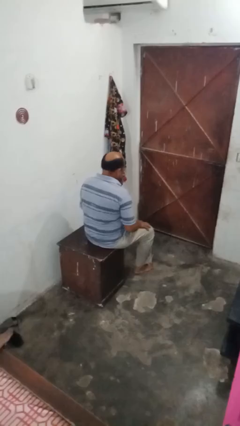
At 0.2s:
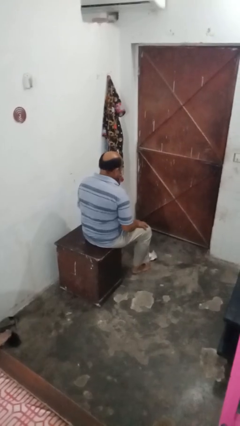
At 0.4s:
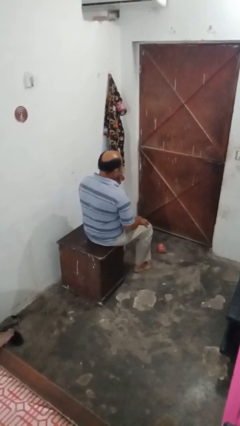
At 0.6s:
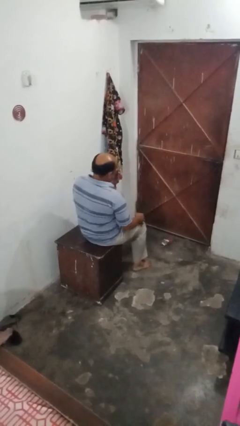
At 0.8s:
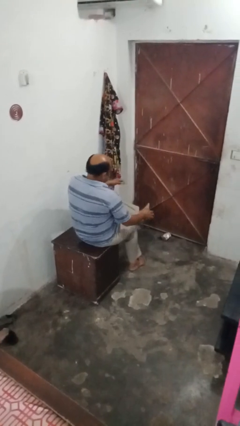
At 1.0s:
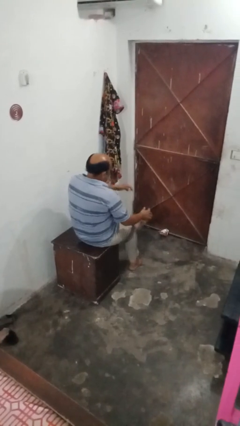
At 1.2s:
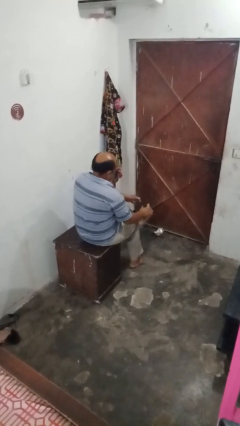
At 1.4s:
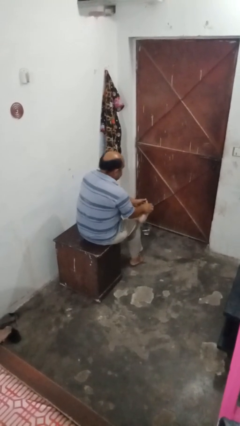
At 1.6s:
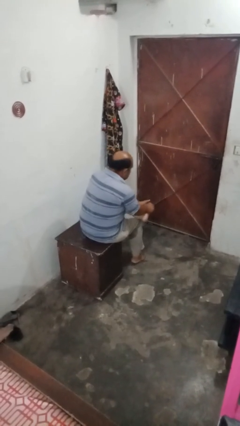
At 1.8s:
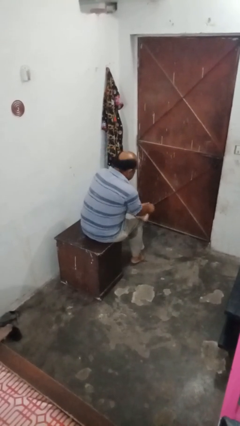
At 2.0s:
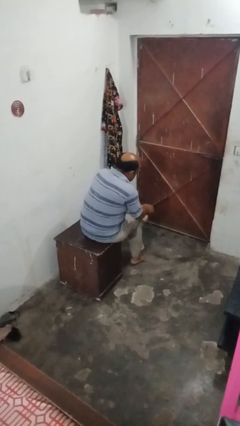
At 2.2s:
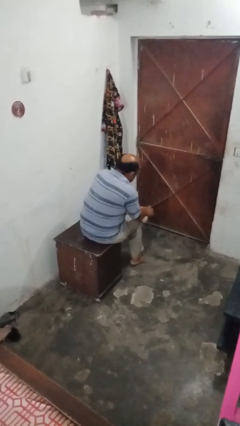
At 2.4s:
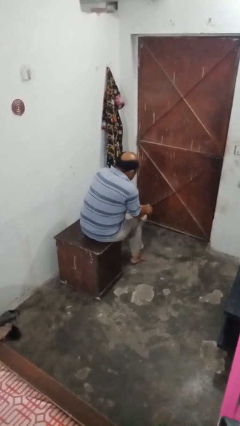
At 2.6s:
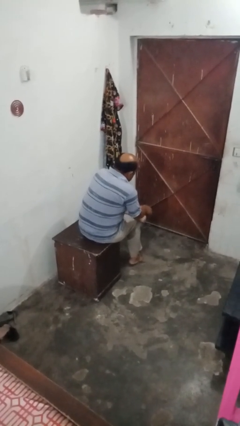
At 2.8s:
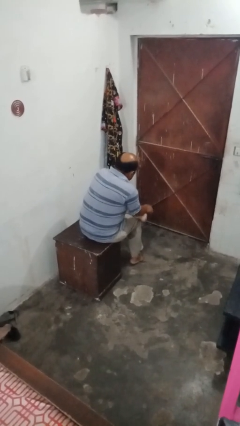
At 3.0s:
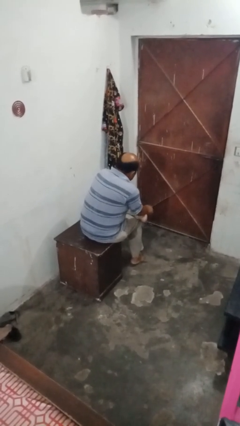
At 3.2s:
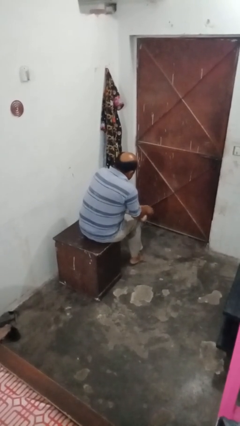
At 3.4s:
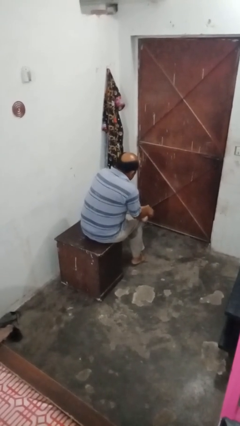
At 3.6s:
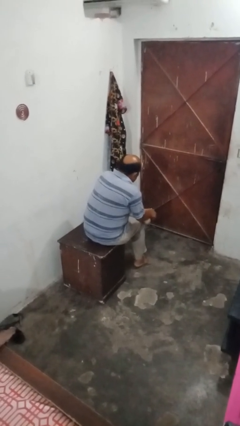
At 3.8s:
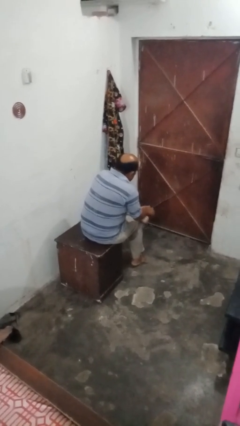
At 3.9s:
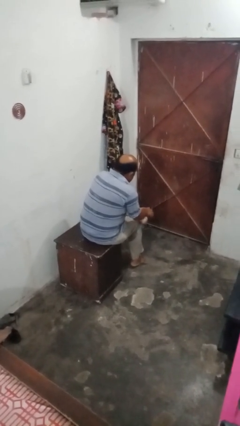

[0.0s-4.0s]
person rubs foot

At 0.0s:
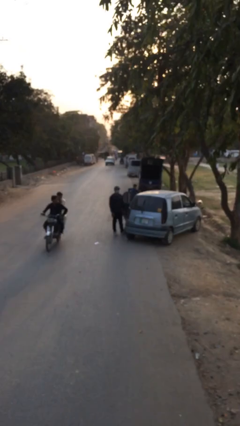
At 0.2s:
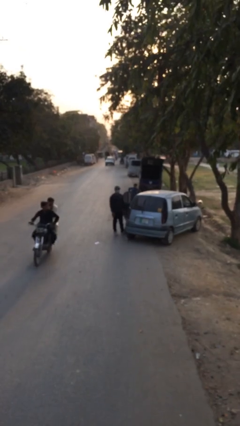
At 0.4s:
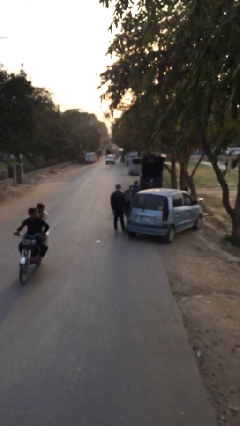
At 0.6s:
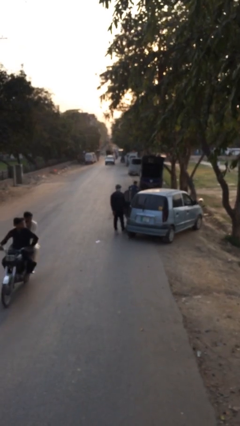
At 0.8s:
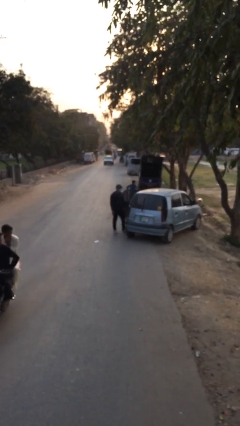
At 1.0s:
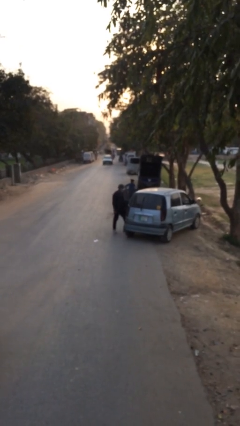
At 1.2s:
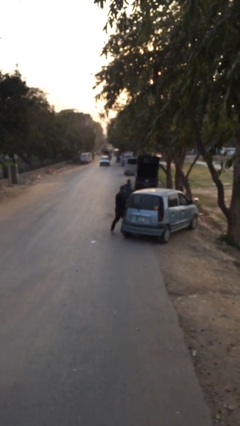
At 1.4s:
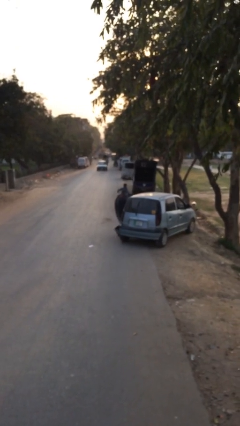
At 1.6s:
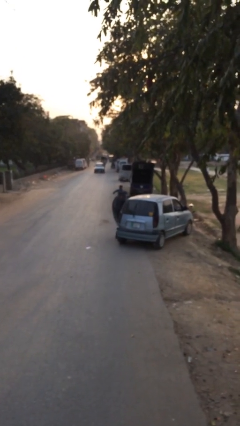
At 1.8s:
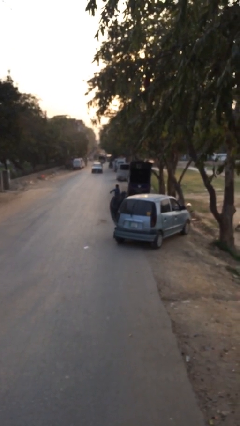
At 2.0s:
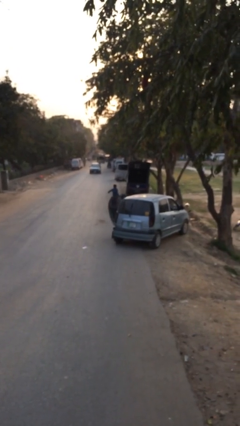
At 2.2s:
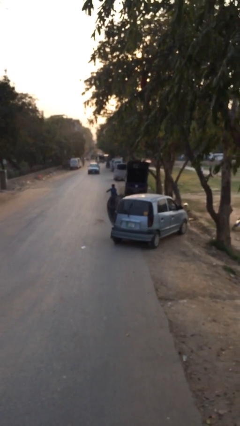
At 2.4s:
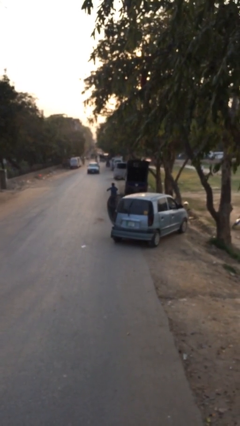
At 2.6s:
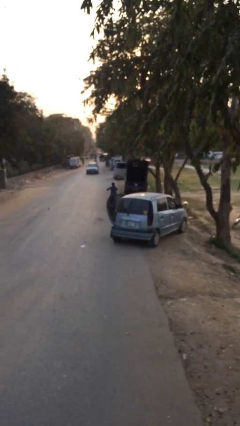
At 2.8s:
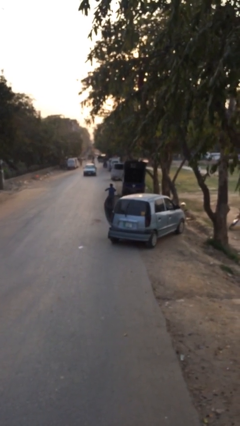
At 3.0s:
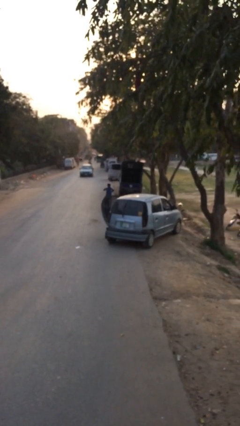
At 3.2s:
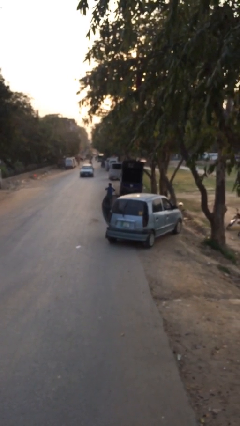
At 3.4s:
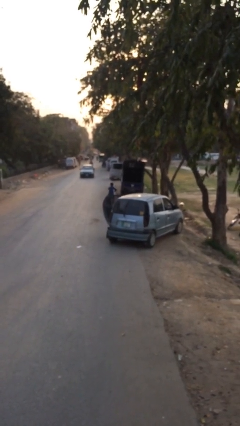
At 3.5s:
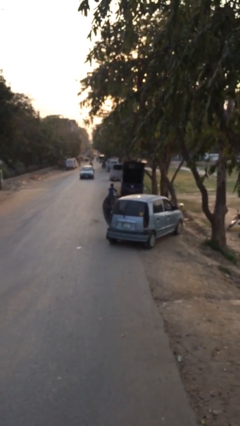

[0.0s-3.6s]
person enters car

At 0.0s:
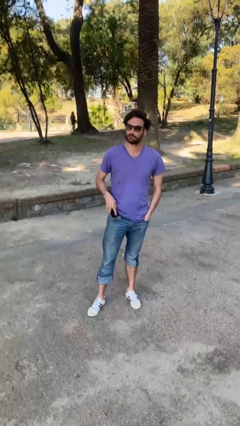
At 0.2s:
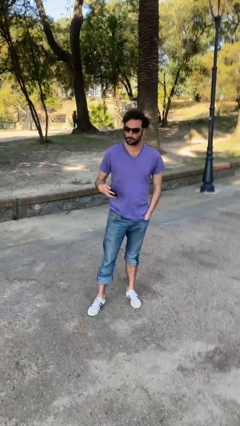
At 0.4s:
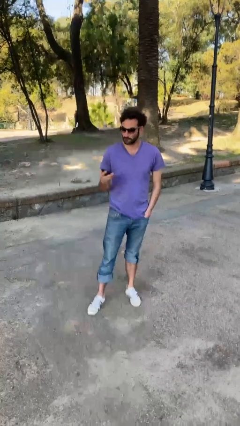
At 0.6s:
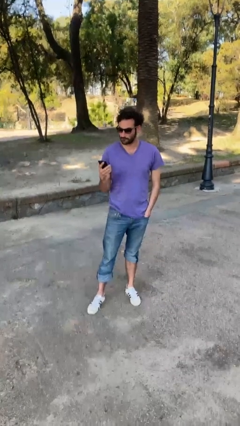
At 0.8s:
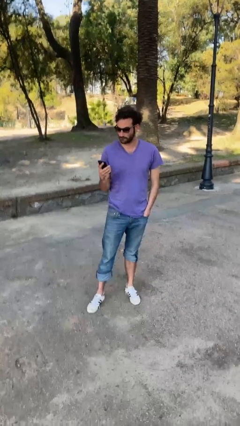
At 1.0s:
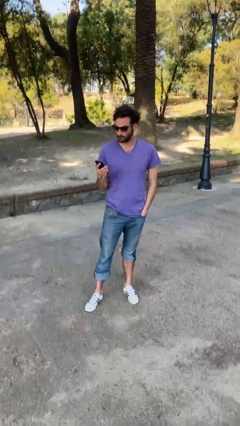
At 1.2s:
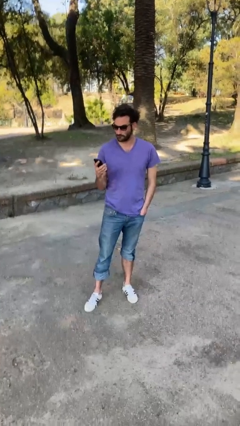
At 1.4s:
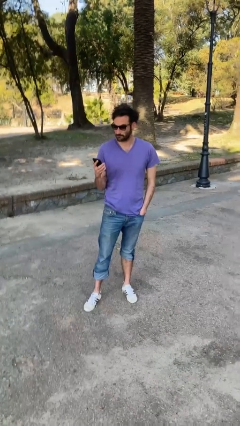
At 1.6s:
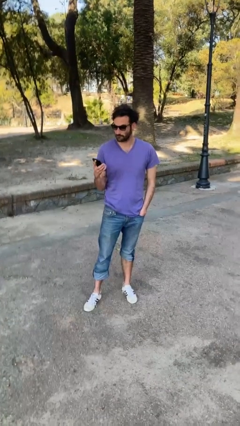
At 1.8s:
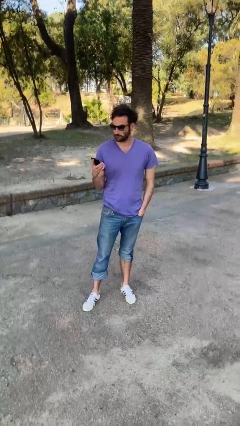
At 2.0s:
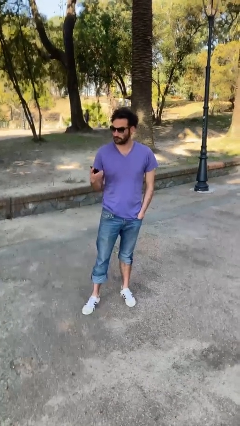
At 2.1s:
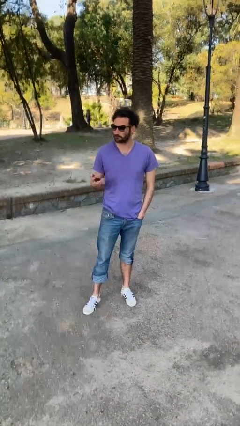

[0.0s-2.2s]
person takes phone from pocket

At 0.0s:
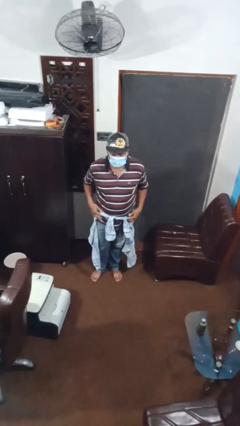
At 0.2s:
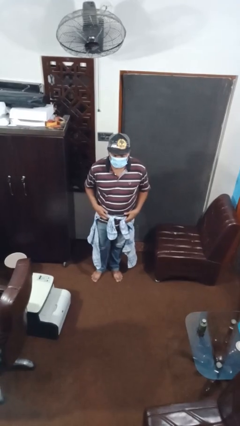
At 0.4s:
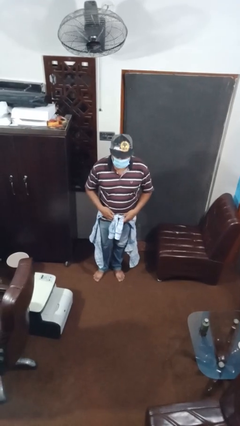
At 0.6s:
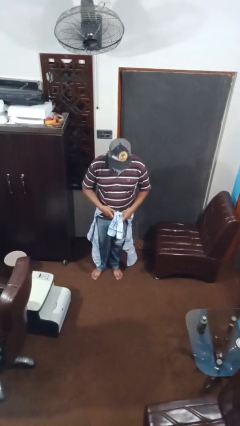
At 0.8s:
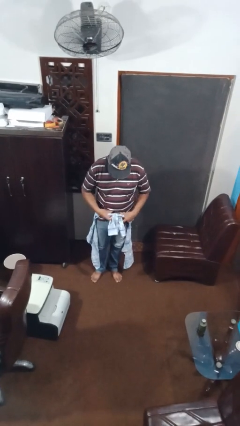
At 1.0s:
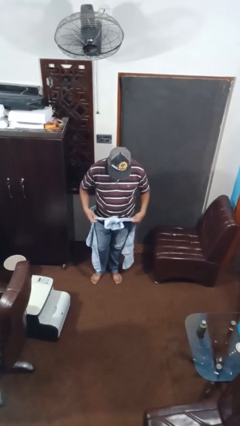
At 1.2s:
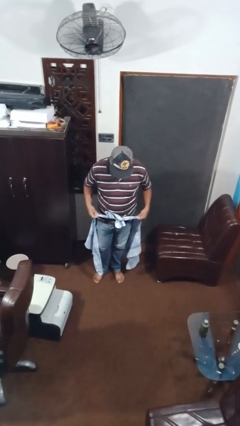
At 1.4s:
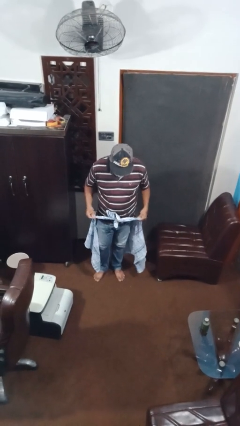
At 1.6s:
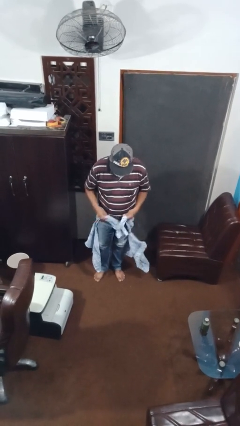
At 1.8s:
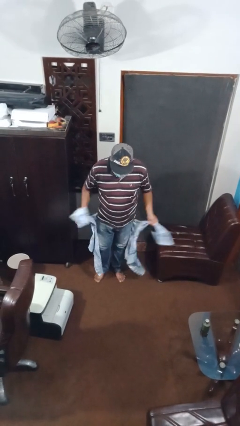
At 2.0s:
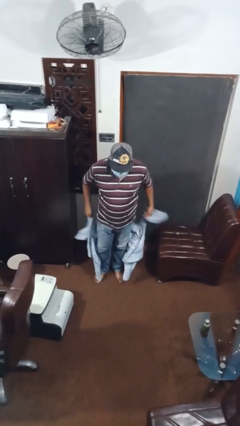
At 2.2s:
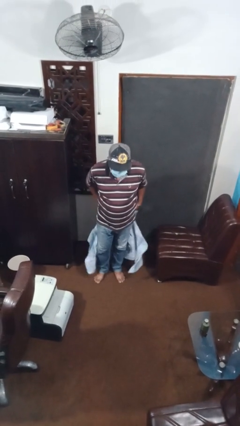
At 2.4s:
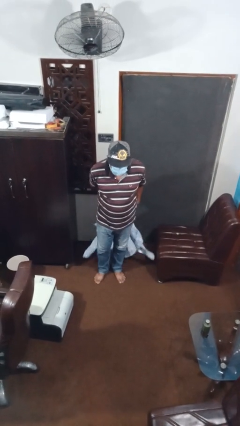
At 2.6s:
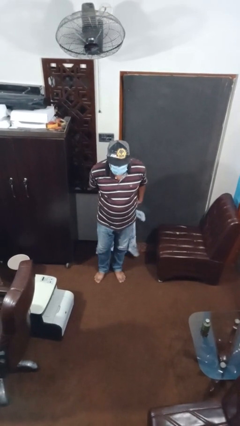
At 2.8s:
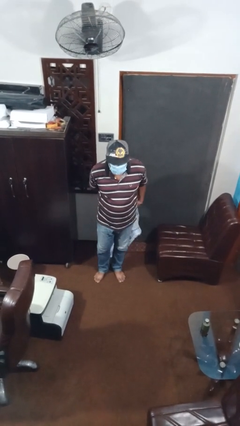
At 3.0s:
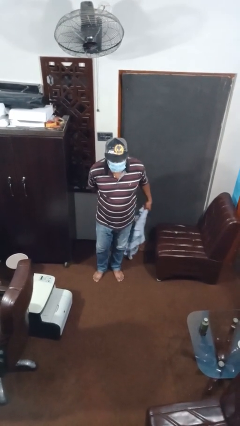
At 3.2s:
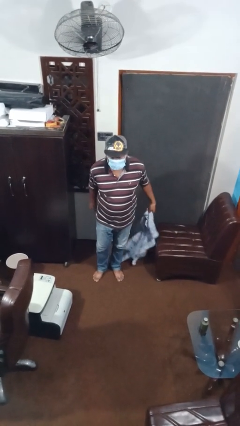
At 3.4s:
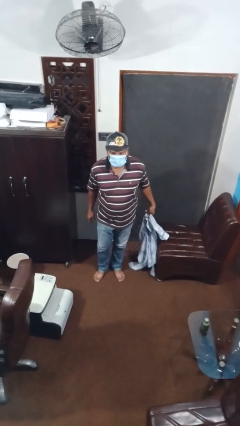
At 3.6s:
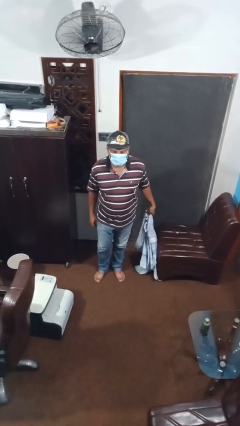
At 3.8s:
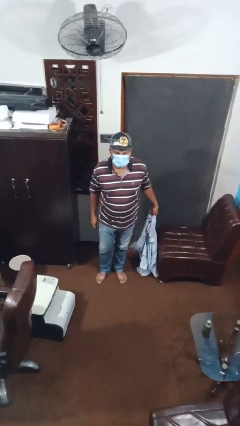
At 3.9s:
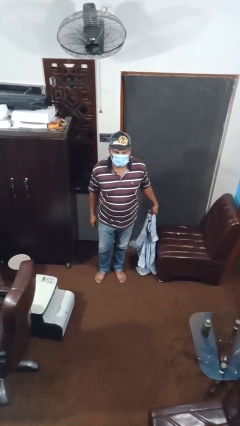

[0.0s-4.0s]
person unties jacket around waist

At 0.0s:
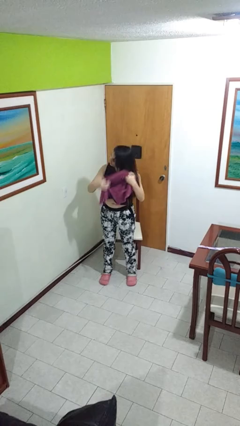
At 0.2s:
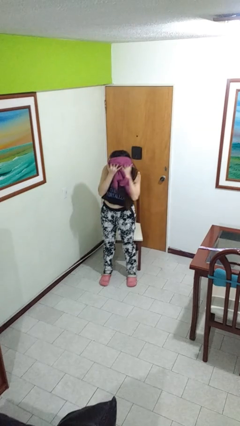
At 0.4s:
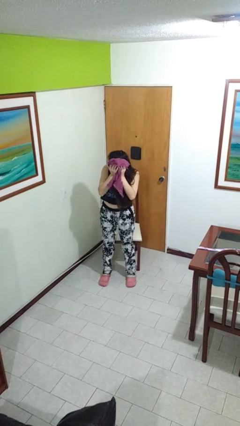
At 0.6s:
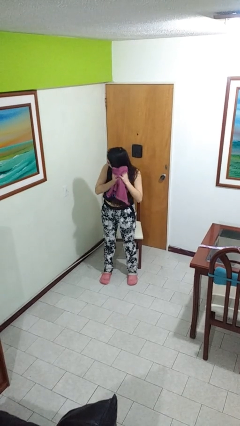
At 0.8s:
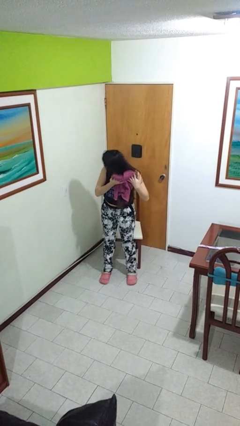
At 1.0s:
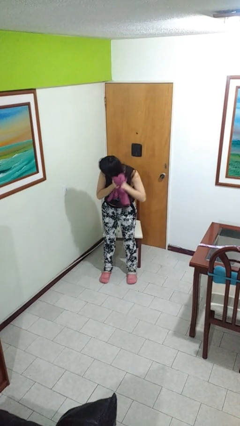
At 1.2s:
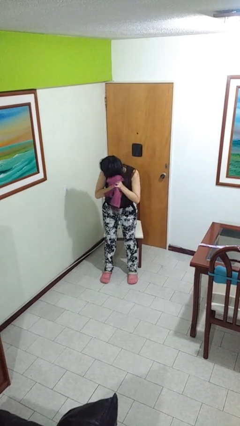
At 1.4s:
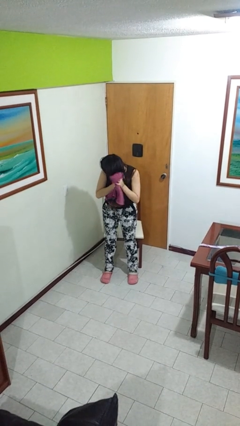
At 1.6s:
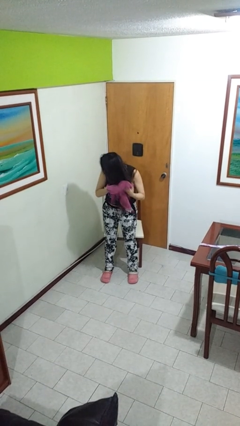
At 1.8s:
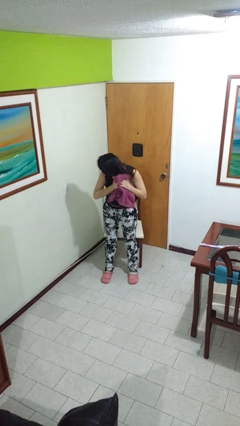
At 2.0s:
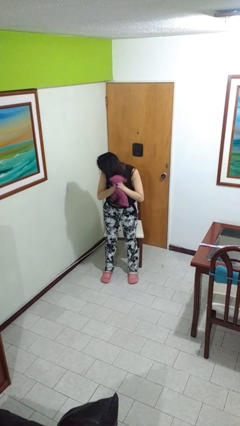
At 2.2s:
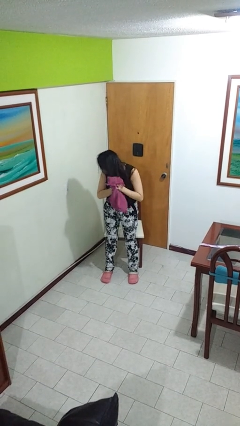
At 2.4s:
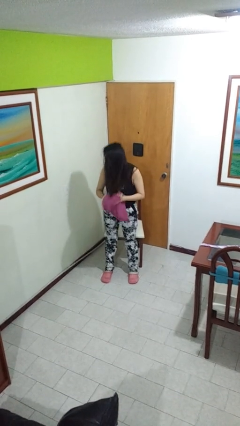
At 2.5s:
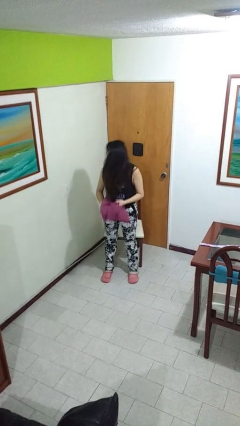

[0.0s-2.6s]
person dries hair with towel

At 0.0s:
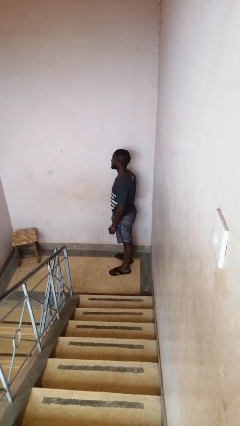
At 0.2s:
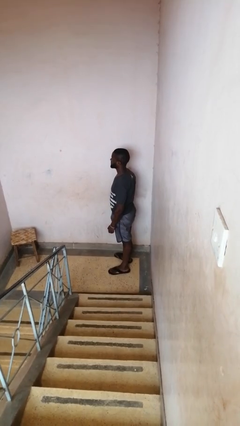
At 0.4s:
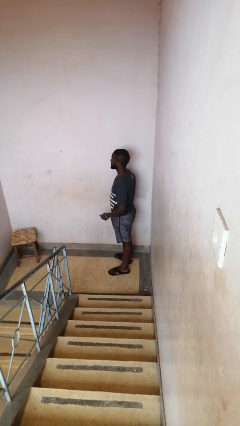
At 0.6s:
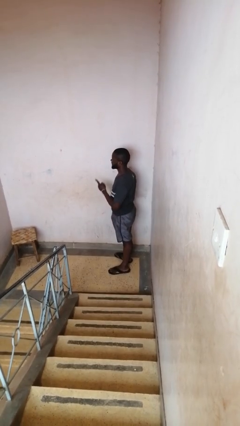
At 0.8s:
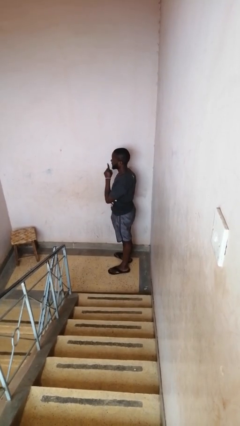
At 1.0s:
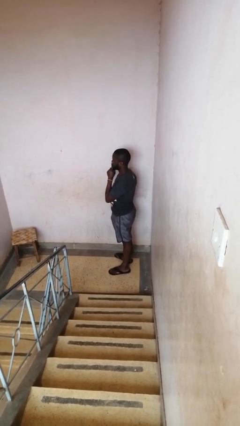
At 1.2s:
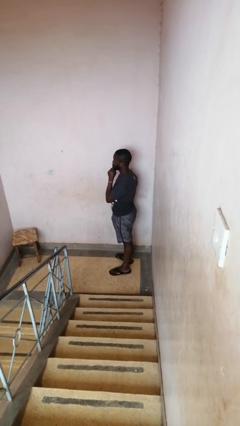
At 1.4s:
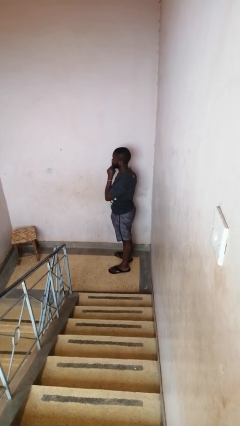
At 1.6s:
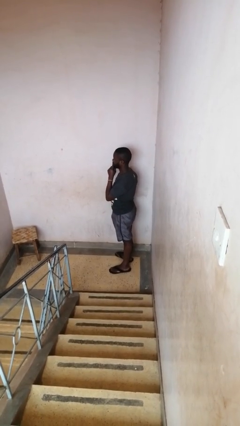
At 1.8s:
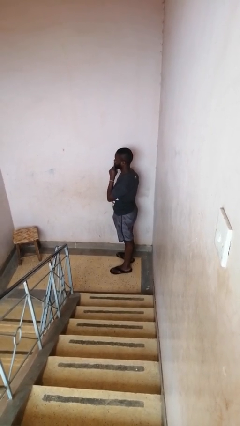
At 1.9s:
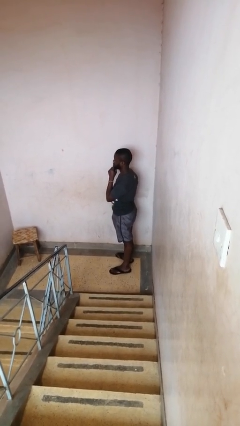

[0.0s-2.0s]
person gestures be quiet
